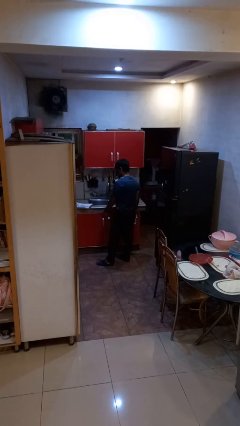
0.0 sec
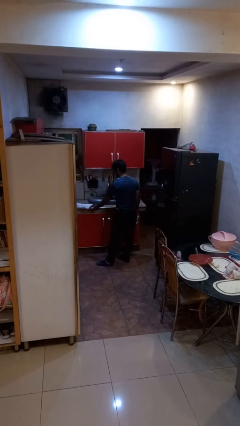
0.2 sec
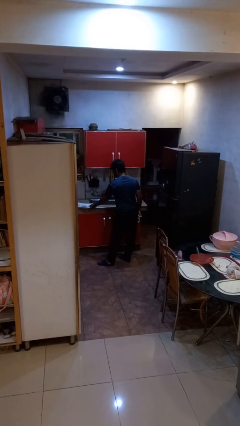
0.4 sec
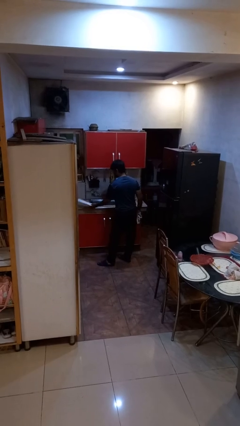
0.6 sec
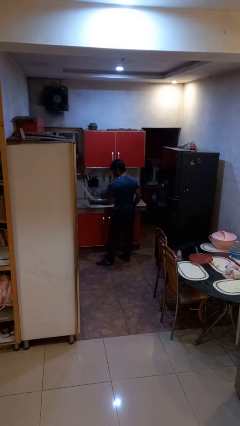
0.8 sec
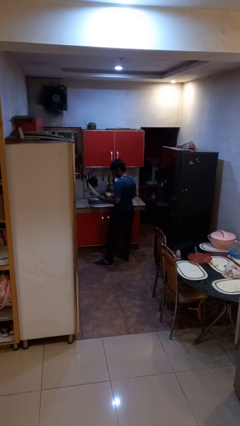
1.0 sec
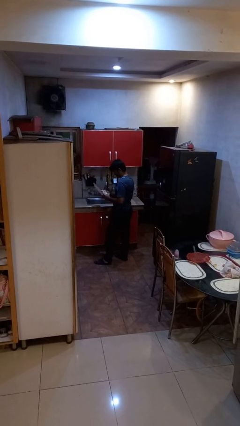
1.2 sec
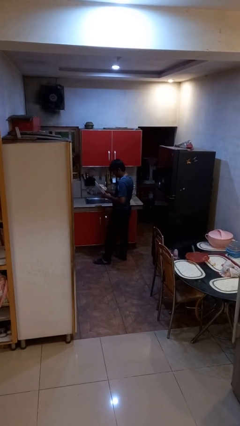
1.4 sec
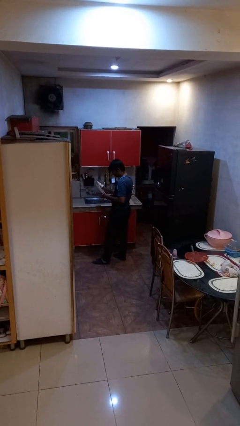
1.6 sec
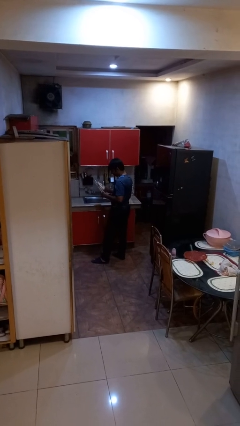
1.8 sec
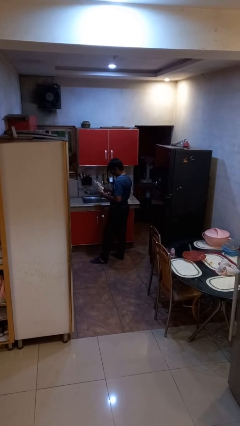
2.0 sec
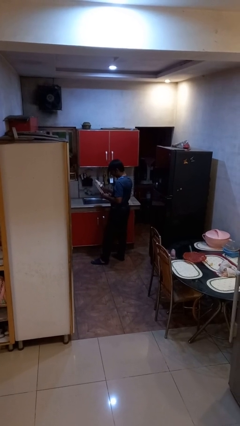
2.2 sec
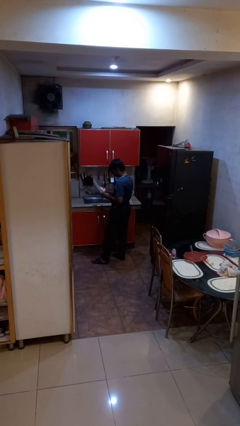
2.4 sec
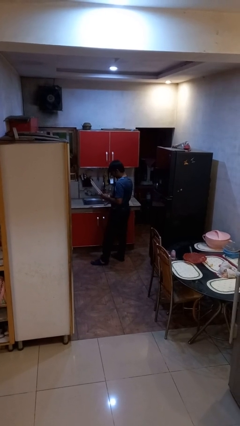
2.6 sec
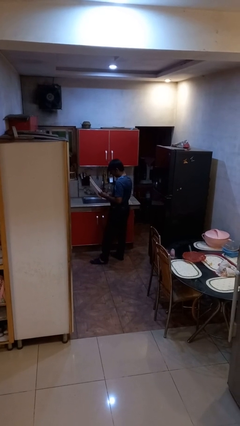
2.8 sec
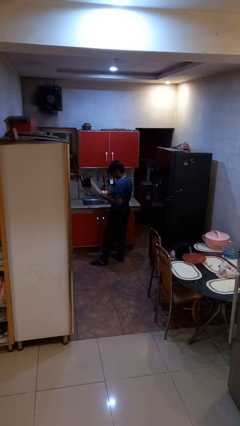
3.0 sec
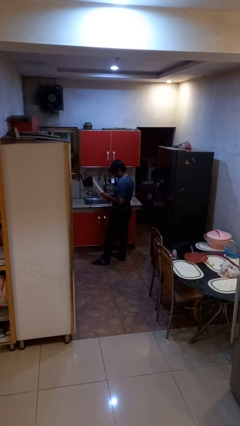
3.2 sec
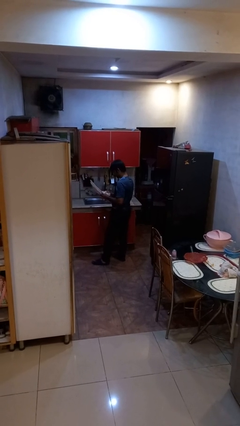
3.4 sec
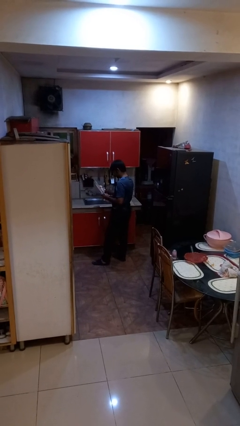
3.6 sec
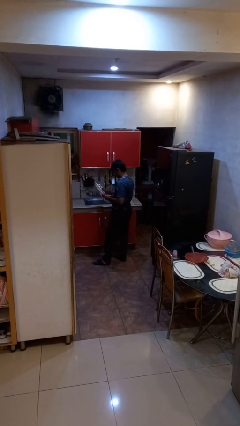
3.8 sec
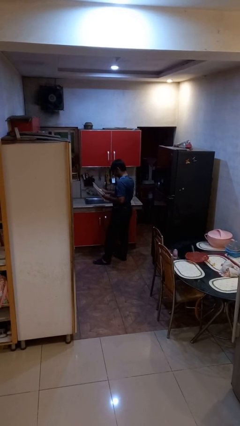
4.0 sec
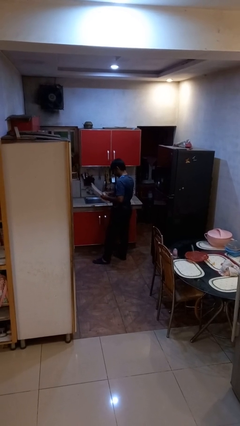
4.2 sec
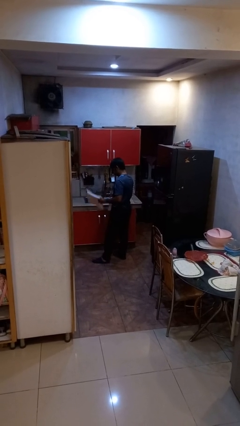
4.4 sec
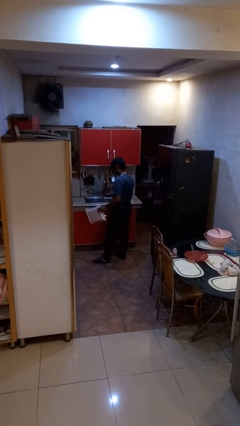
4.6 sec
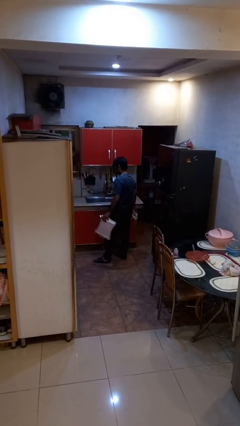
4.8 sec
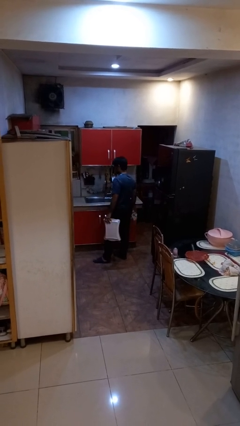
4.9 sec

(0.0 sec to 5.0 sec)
person dries dish

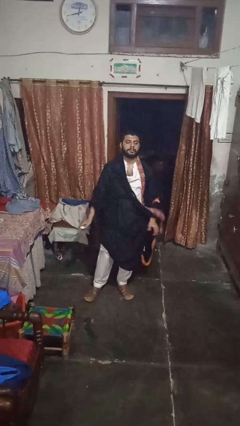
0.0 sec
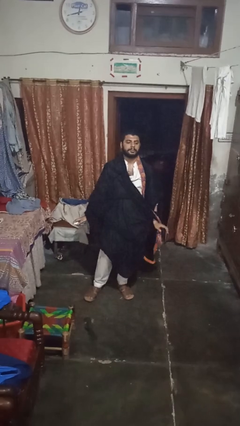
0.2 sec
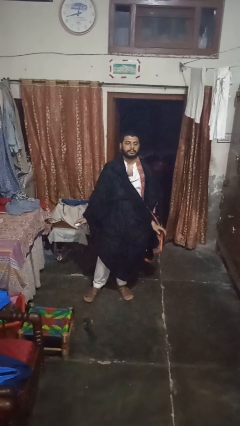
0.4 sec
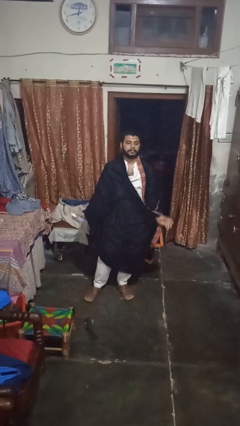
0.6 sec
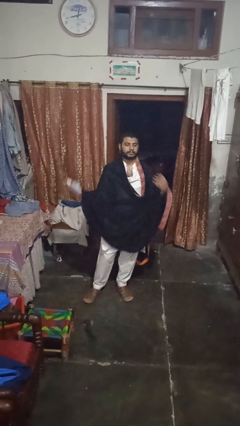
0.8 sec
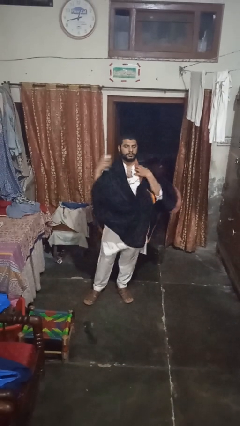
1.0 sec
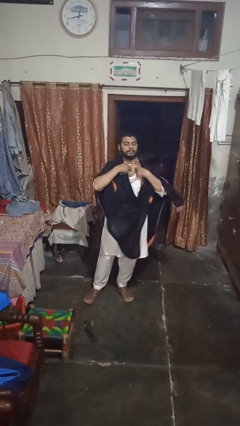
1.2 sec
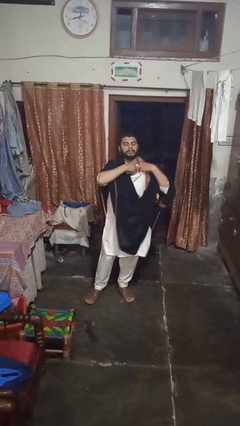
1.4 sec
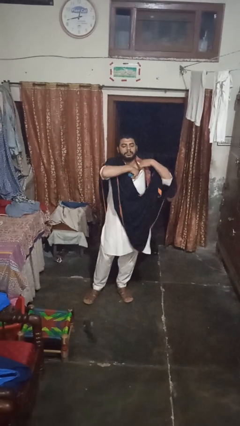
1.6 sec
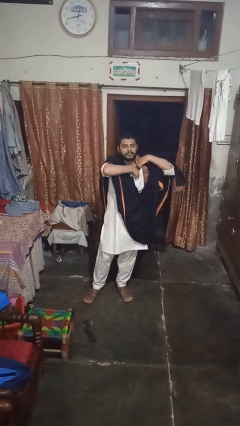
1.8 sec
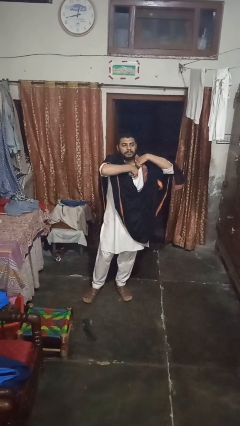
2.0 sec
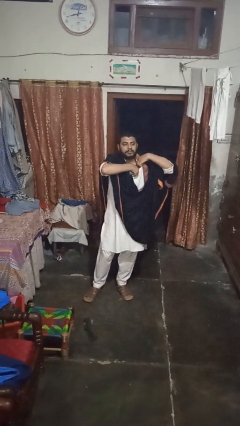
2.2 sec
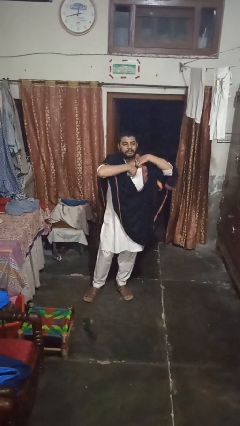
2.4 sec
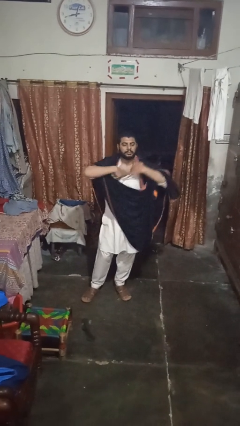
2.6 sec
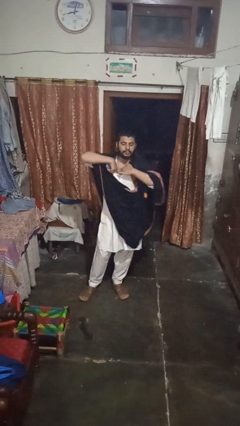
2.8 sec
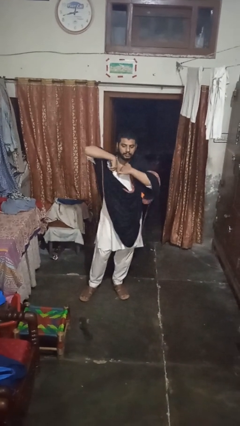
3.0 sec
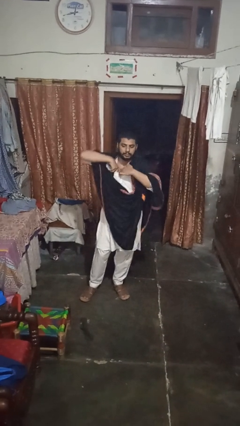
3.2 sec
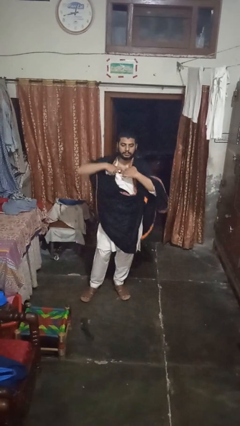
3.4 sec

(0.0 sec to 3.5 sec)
person applies deodorant

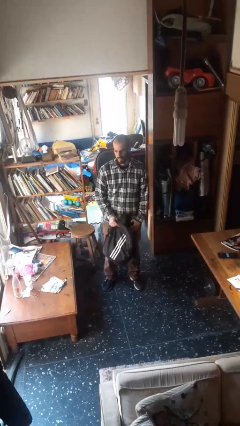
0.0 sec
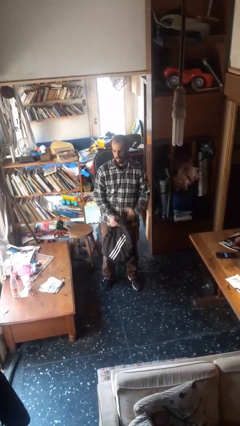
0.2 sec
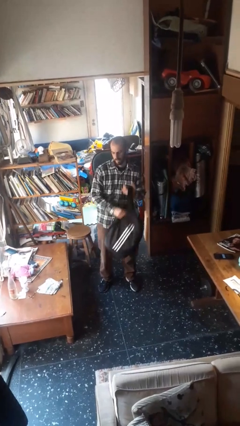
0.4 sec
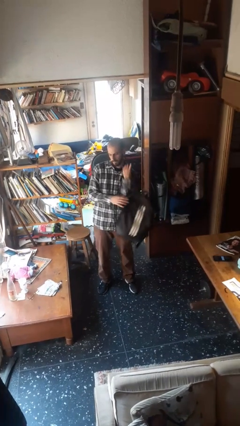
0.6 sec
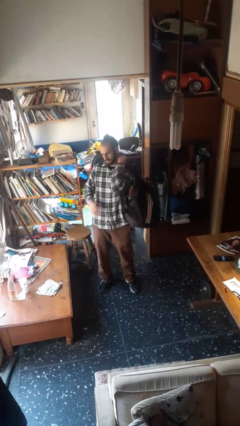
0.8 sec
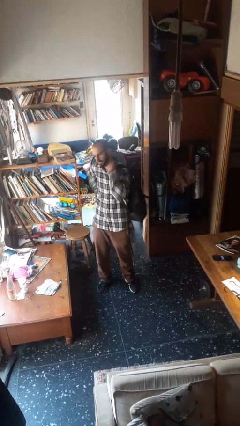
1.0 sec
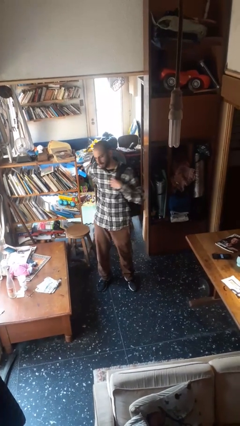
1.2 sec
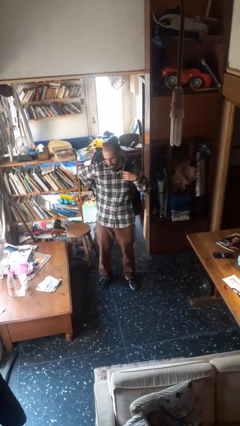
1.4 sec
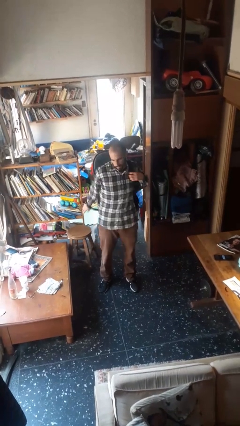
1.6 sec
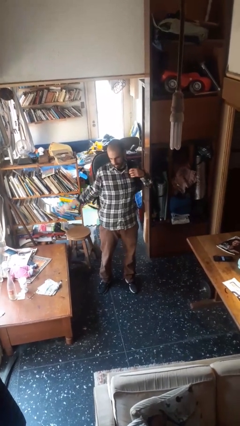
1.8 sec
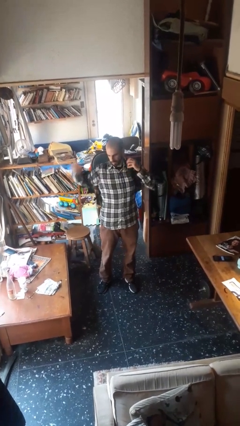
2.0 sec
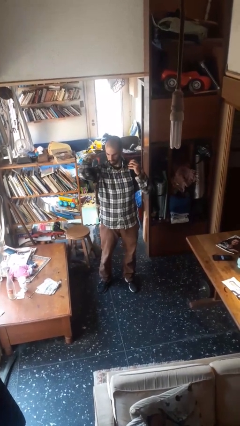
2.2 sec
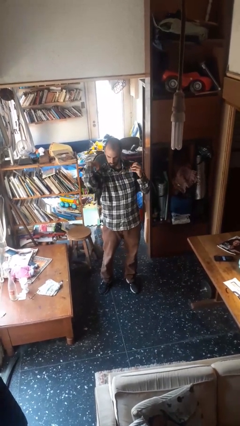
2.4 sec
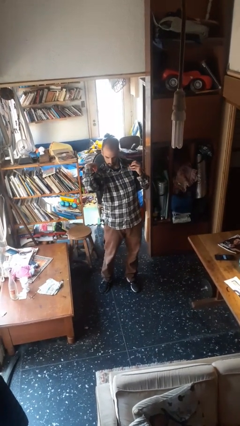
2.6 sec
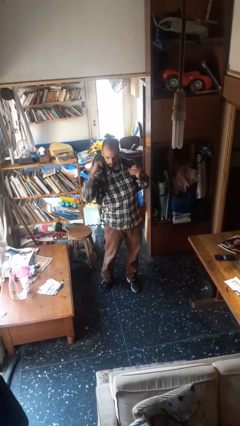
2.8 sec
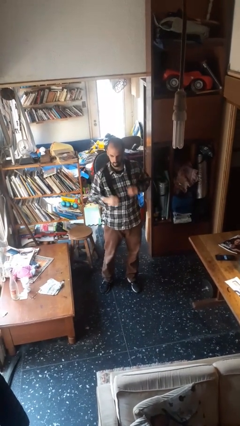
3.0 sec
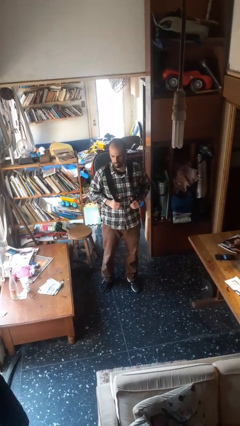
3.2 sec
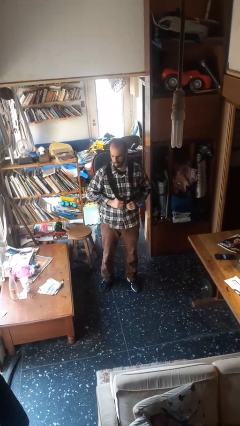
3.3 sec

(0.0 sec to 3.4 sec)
person puts on backpack

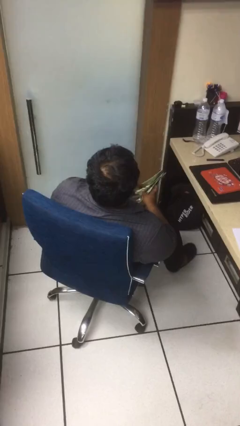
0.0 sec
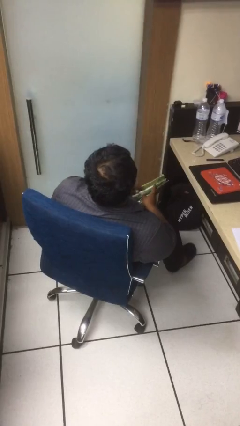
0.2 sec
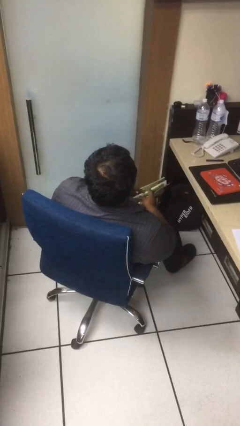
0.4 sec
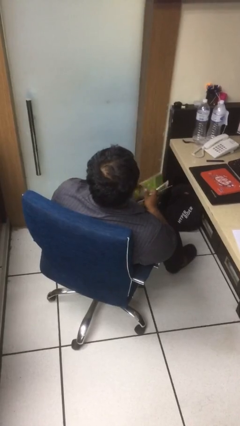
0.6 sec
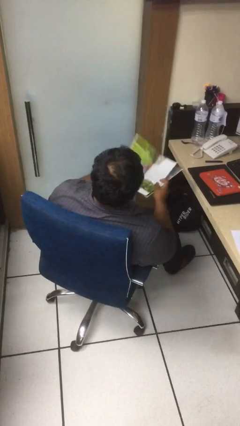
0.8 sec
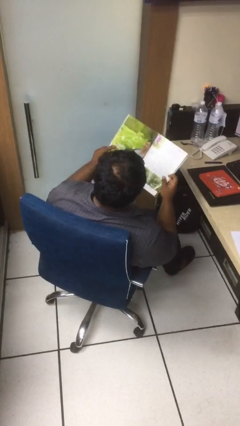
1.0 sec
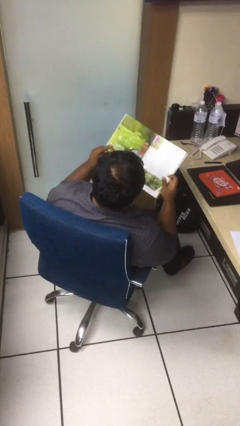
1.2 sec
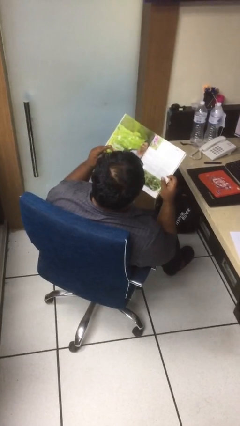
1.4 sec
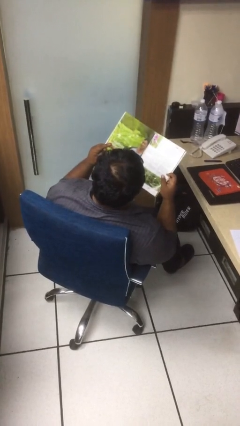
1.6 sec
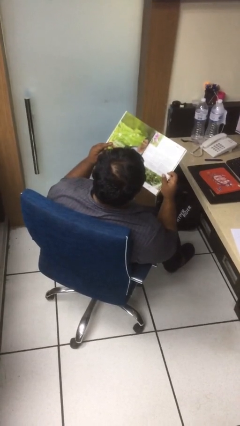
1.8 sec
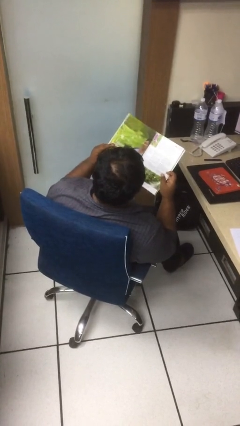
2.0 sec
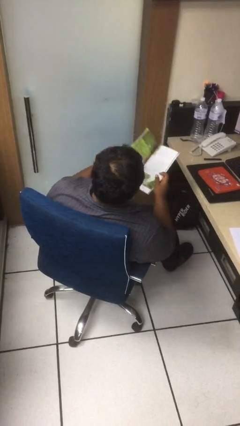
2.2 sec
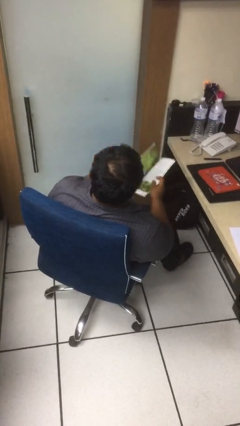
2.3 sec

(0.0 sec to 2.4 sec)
person reads magazine

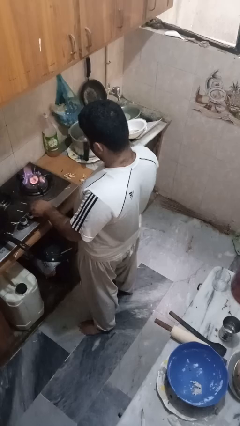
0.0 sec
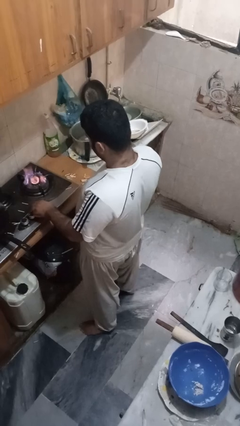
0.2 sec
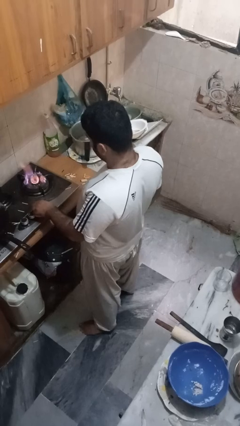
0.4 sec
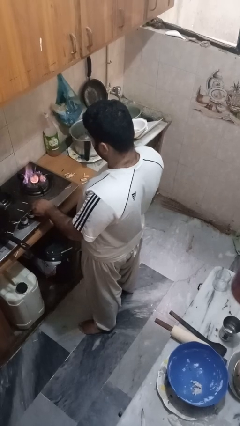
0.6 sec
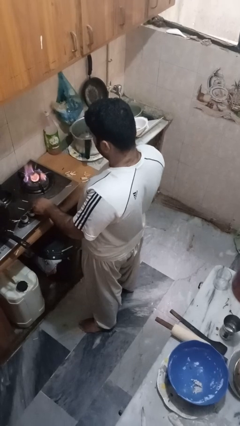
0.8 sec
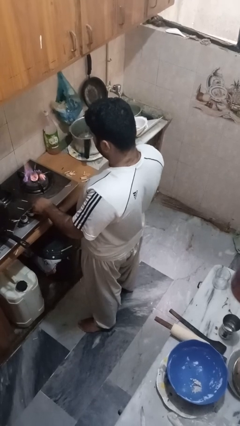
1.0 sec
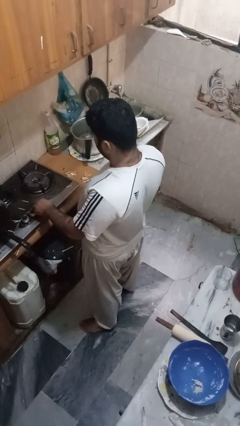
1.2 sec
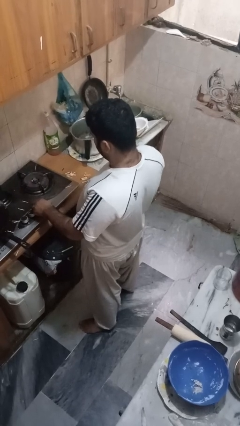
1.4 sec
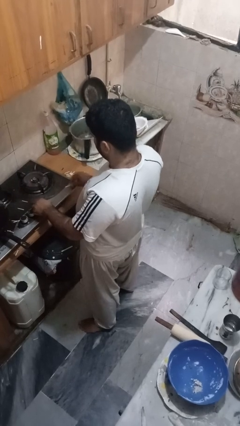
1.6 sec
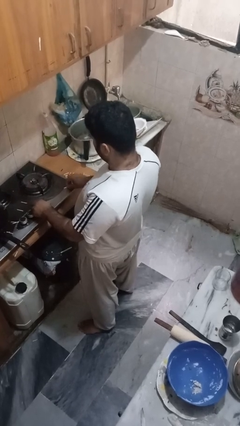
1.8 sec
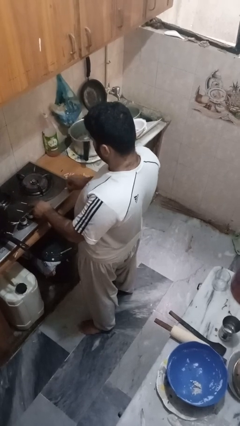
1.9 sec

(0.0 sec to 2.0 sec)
person turns off stovetop

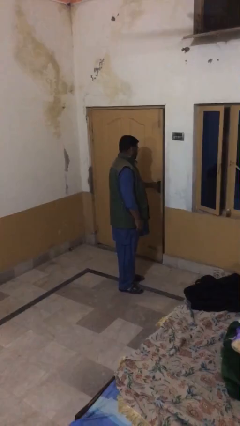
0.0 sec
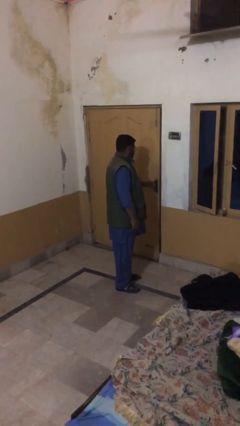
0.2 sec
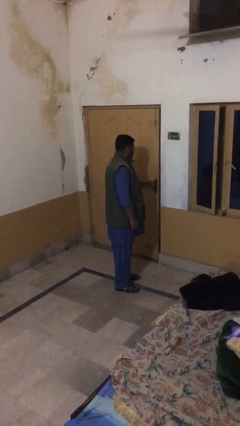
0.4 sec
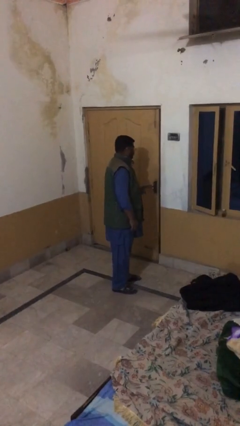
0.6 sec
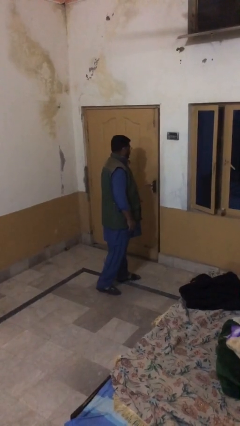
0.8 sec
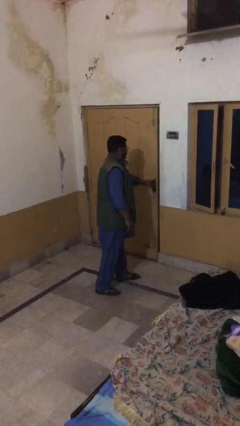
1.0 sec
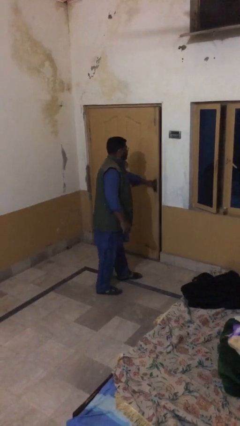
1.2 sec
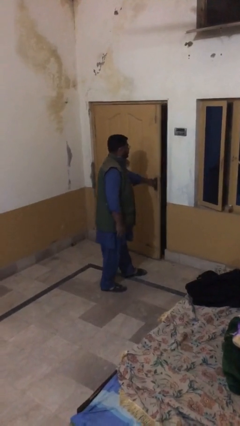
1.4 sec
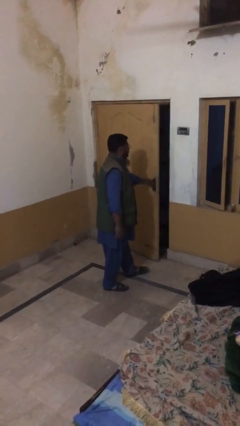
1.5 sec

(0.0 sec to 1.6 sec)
person opens facility door
